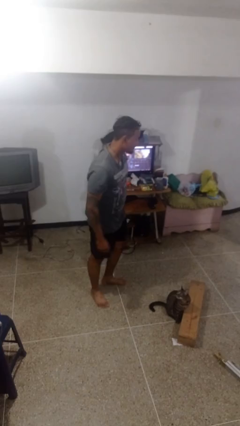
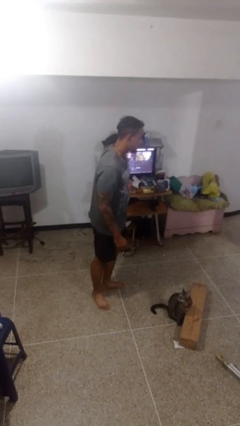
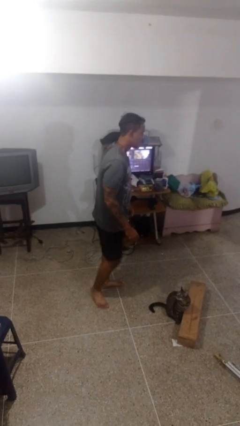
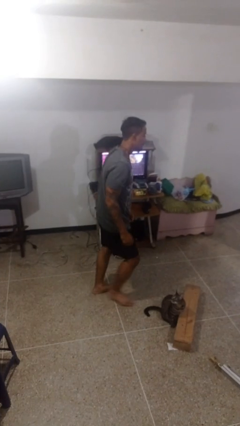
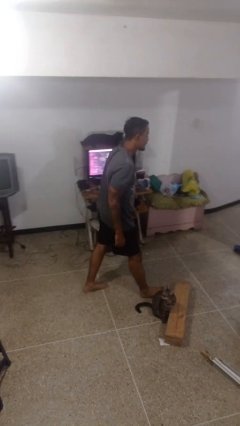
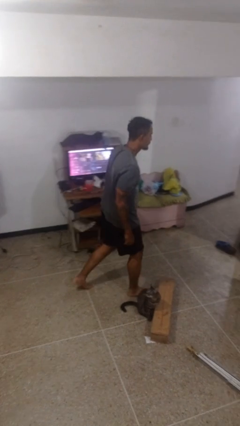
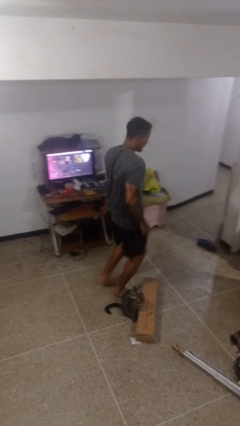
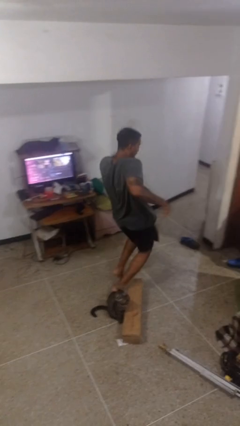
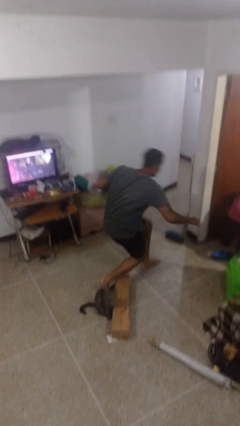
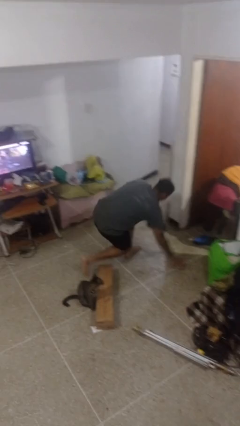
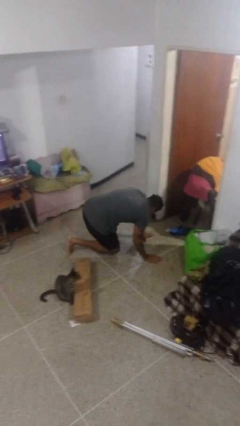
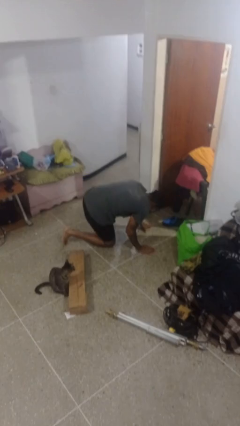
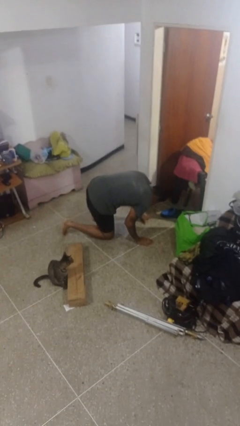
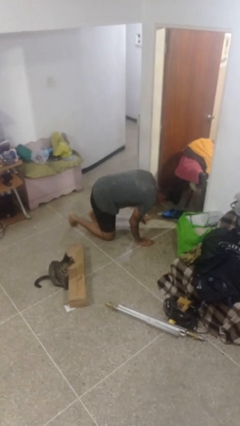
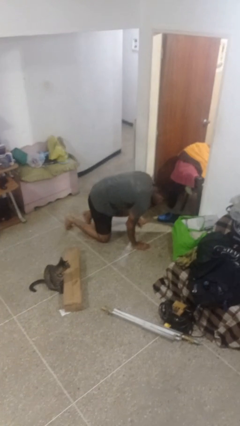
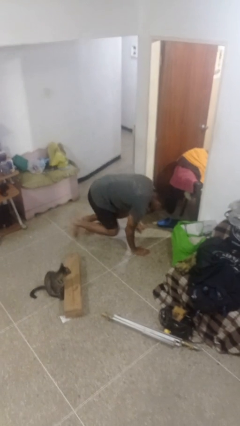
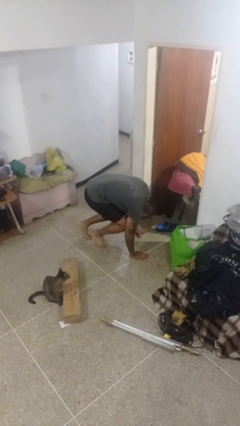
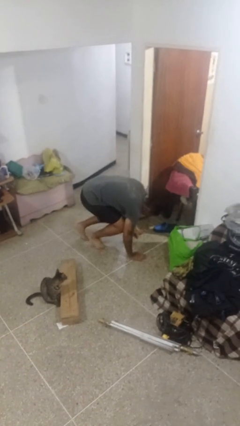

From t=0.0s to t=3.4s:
person trips on object on floor

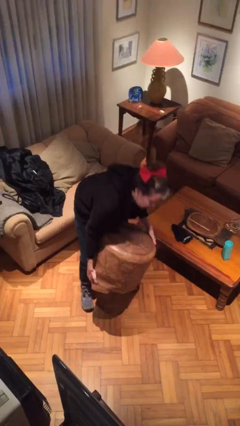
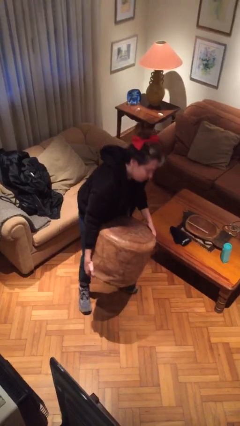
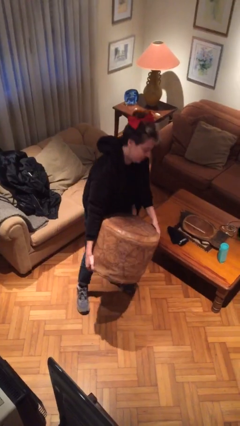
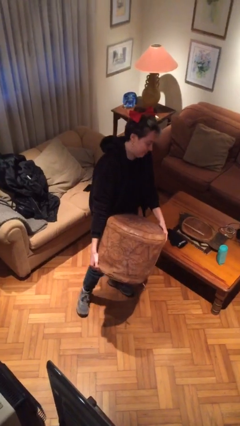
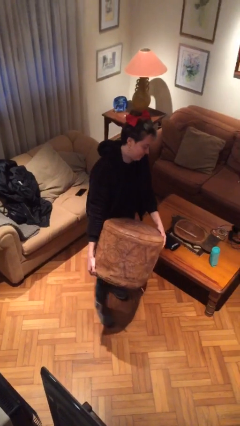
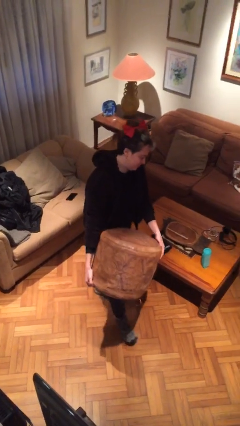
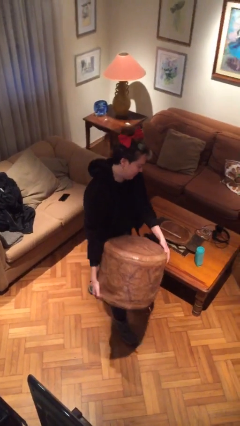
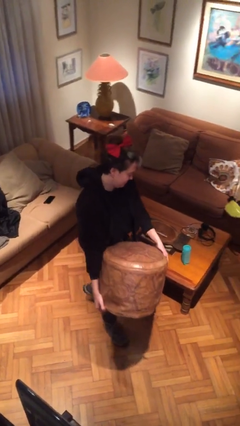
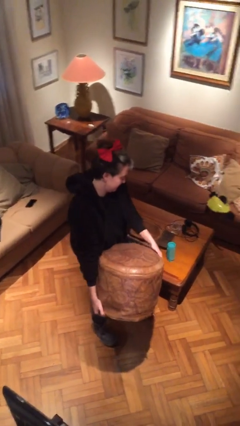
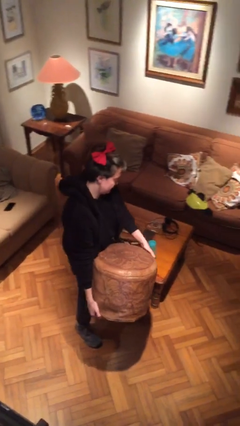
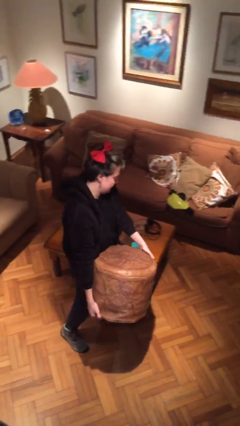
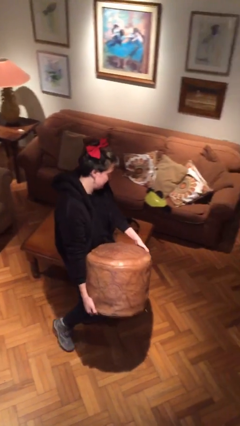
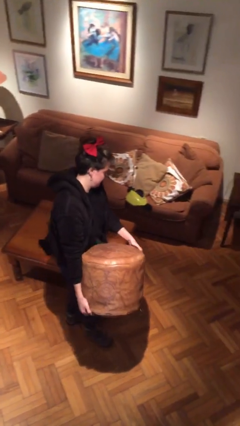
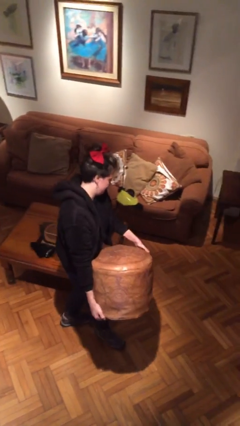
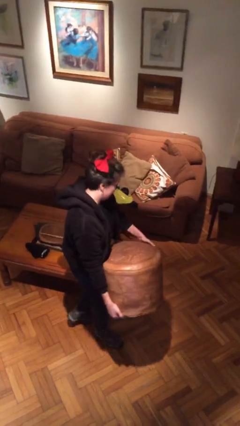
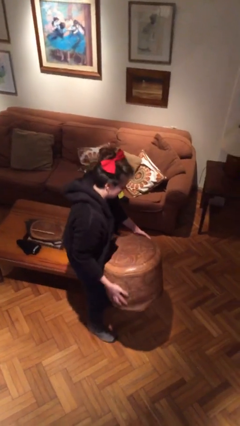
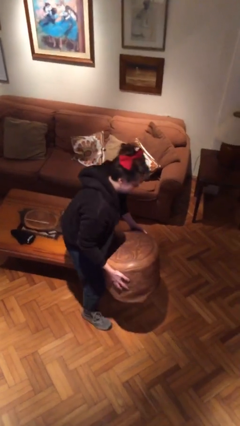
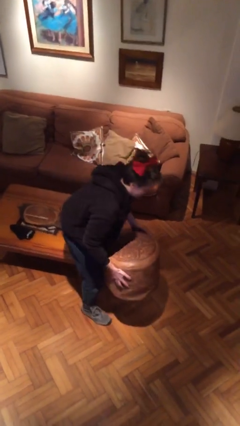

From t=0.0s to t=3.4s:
person carries heavy object

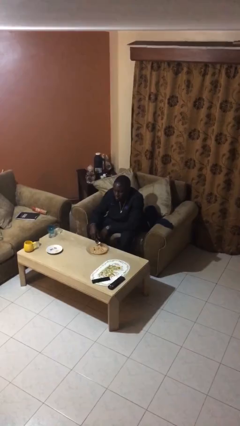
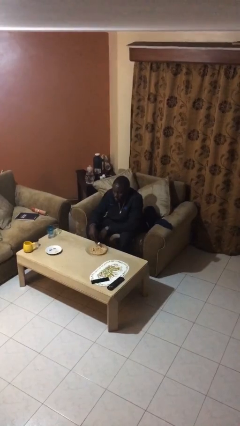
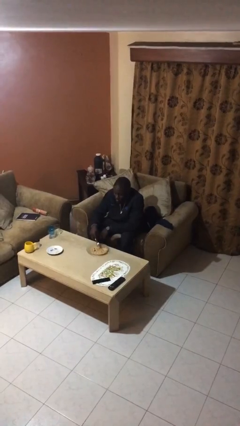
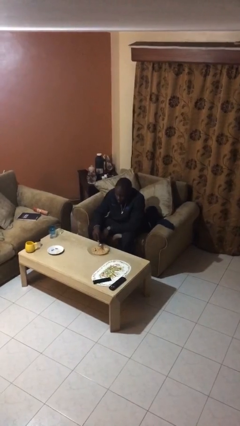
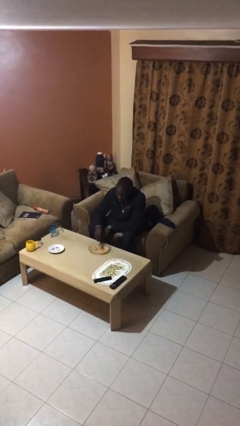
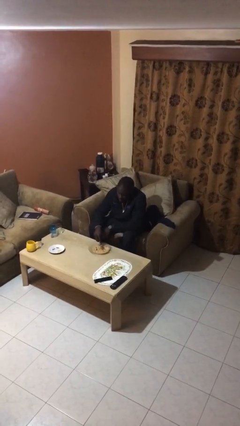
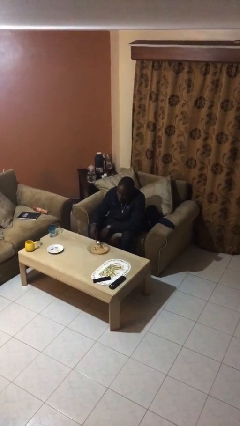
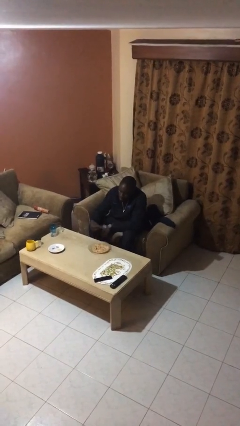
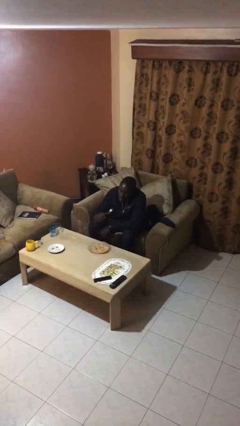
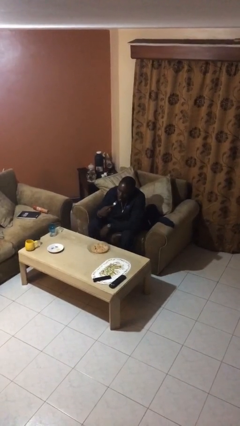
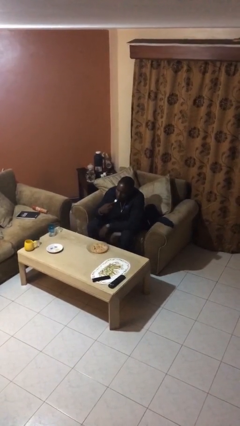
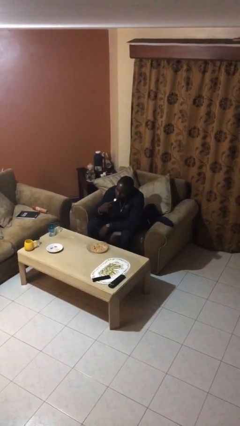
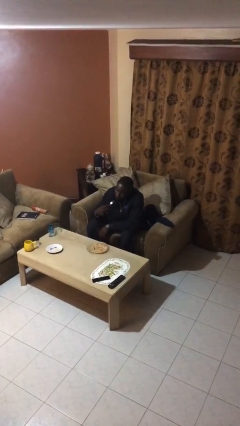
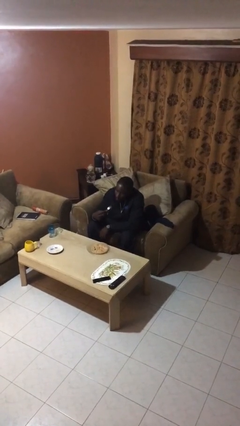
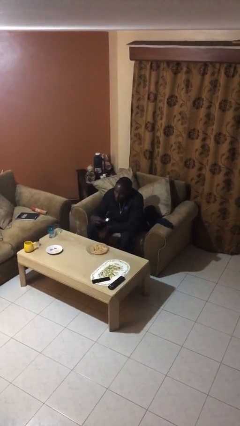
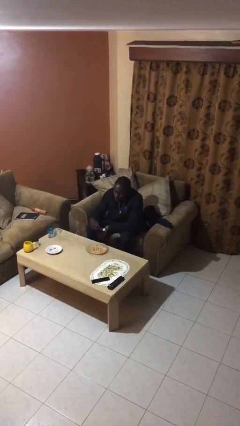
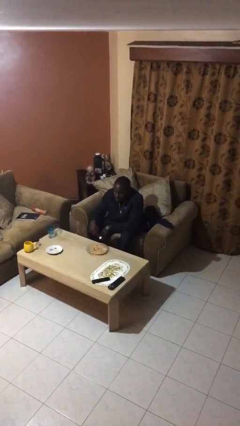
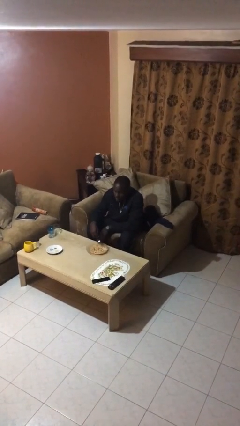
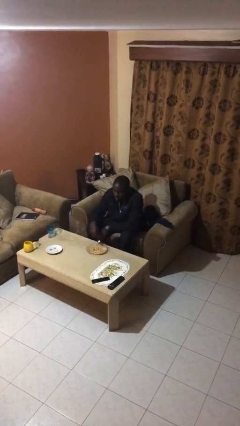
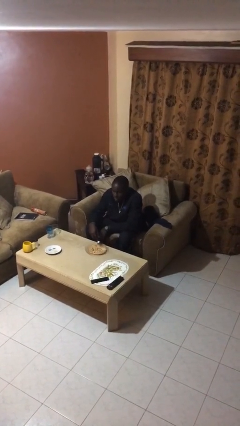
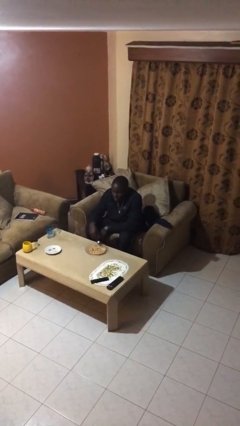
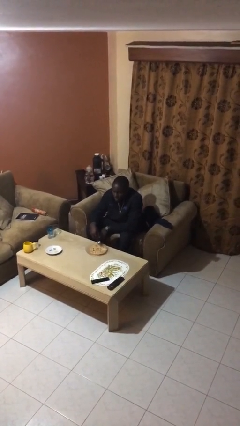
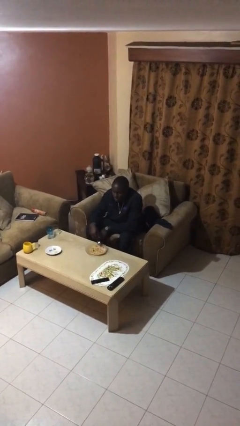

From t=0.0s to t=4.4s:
person eats with utensil

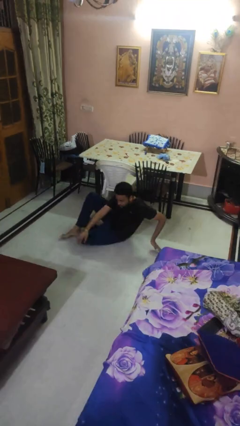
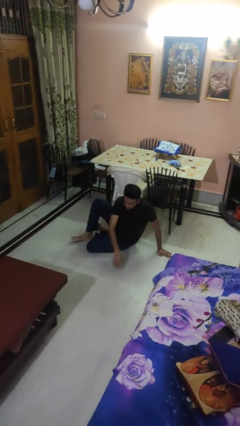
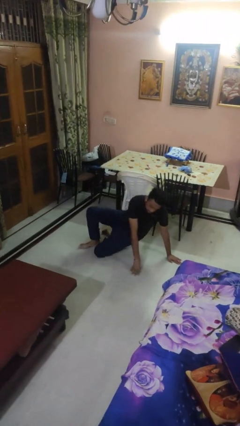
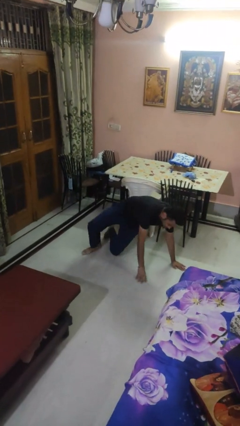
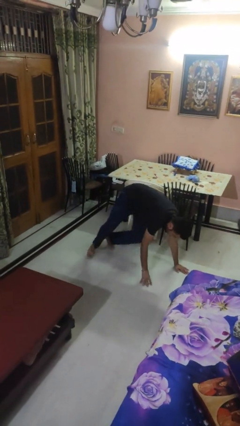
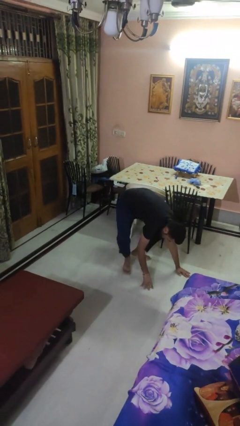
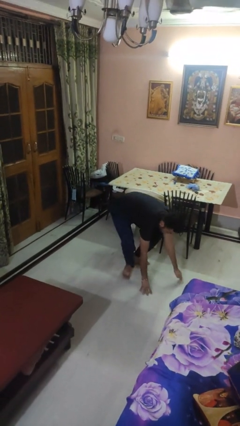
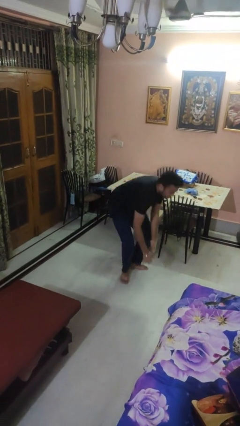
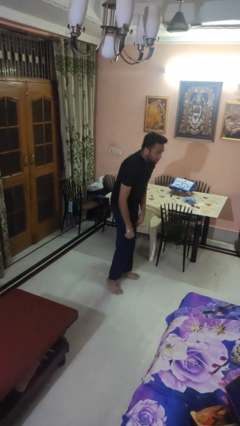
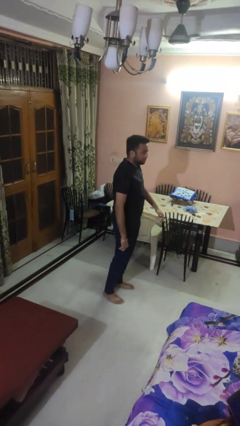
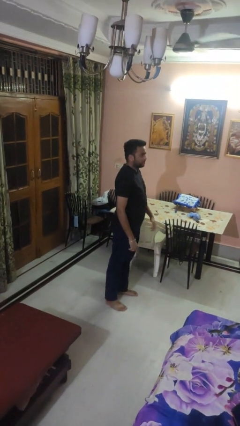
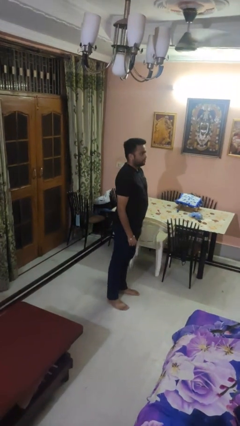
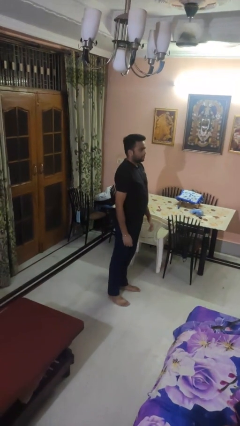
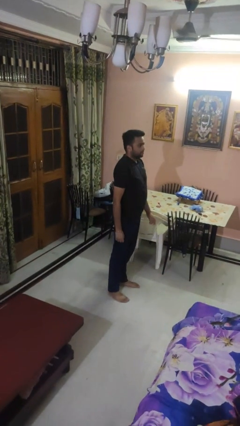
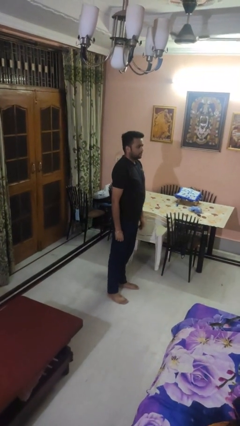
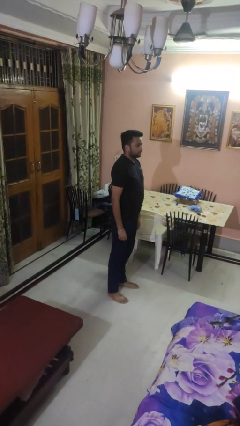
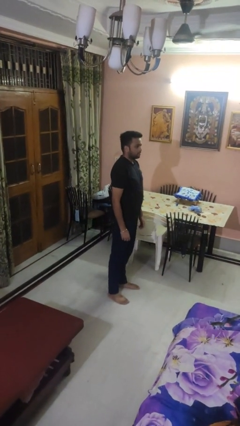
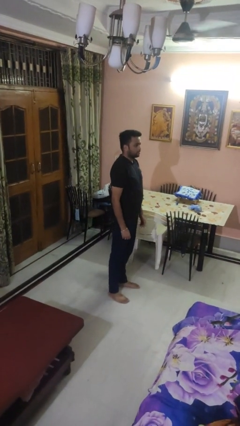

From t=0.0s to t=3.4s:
person stands up from floor

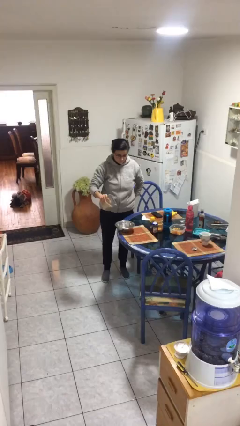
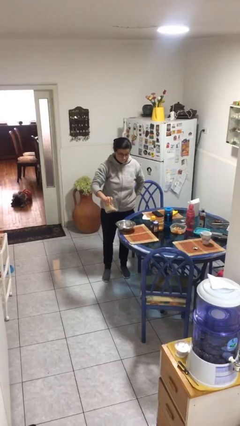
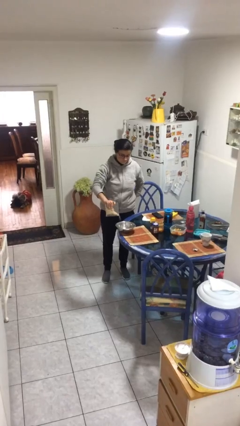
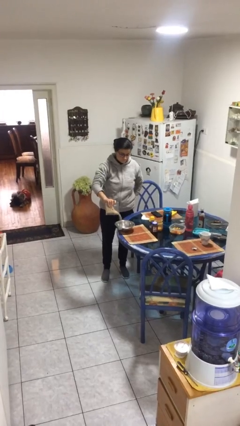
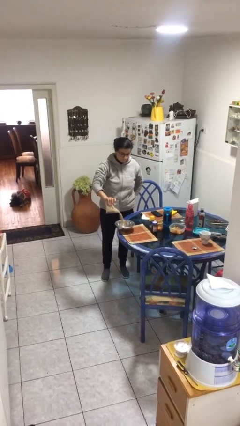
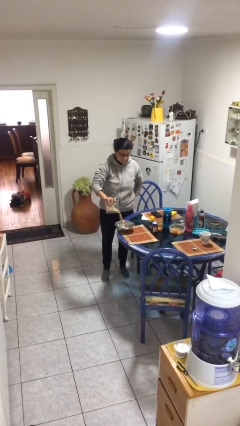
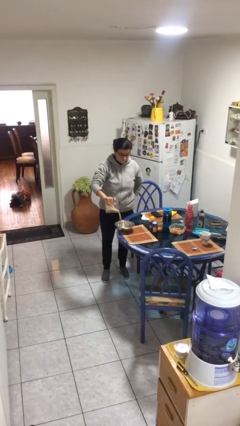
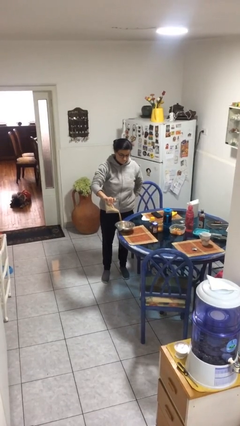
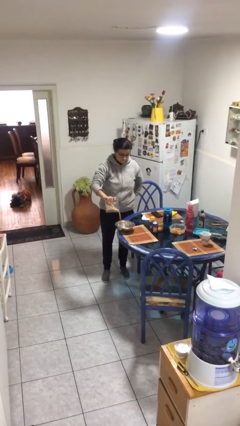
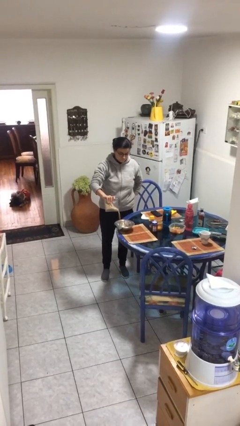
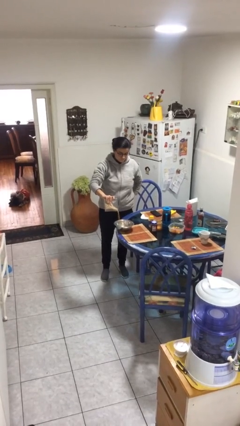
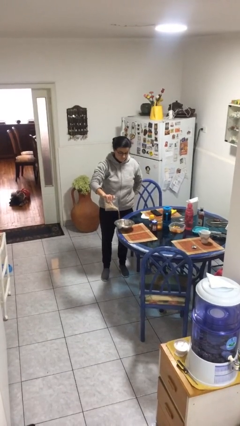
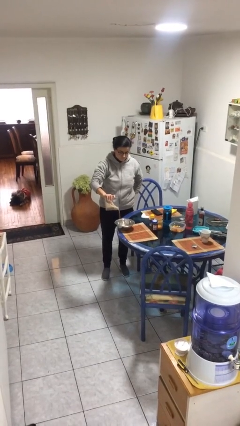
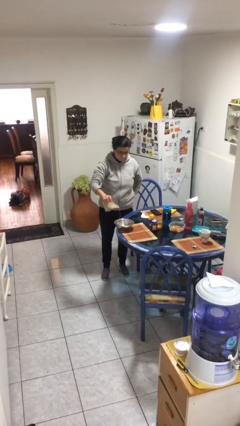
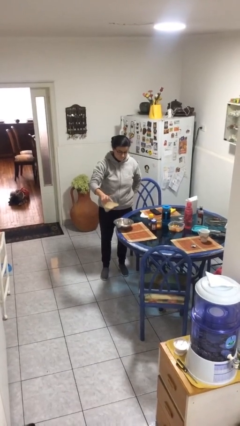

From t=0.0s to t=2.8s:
person pours into bowl
